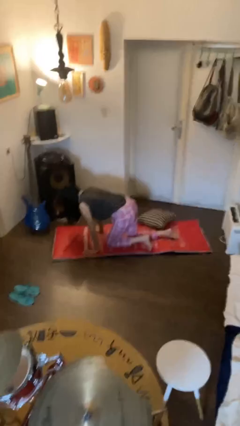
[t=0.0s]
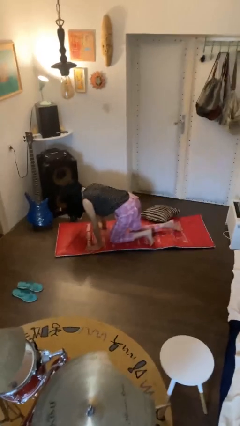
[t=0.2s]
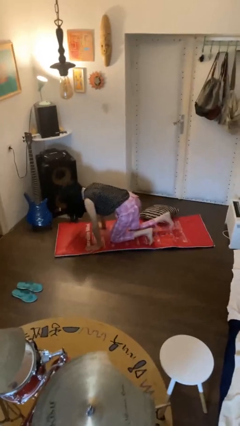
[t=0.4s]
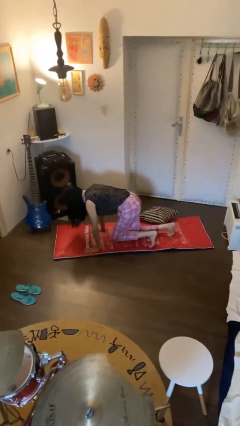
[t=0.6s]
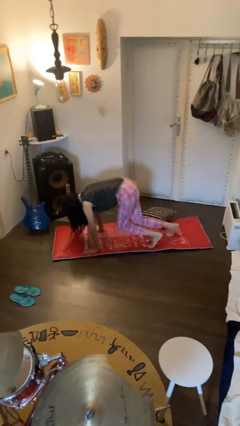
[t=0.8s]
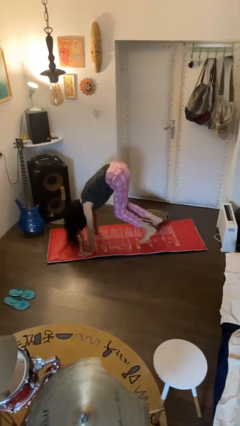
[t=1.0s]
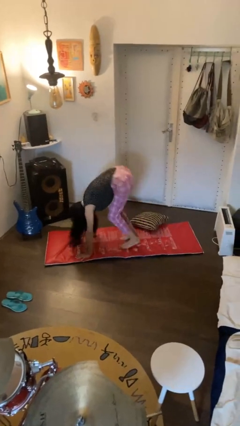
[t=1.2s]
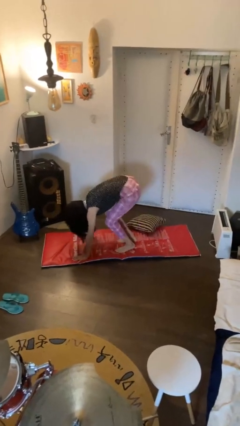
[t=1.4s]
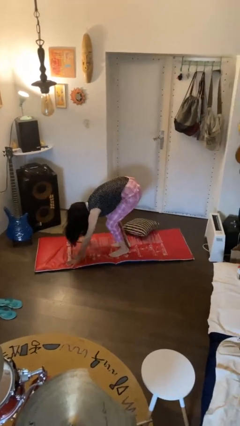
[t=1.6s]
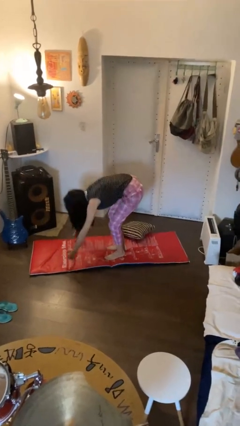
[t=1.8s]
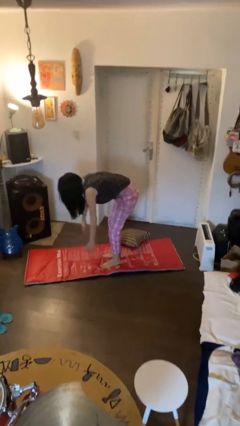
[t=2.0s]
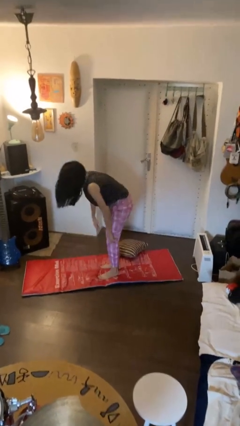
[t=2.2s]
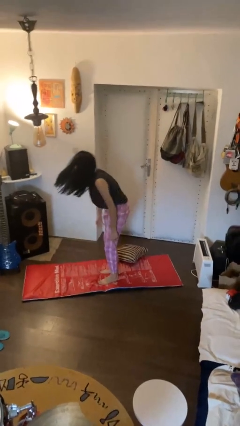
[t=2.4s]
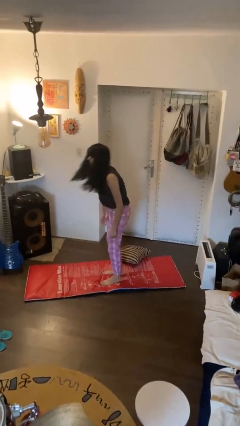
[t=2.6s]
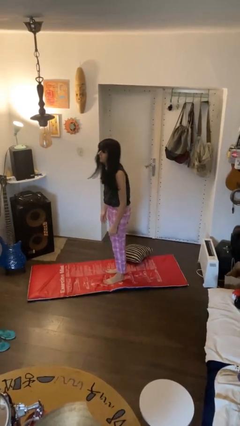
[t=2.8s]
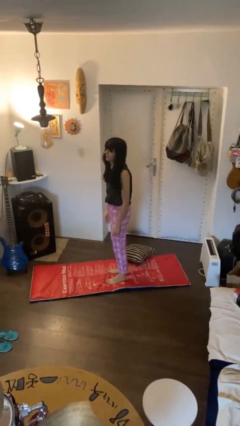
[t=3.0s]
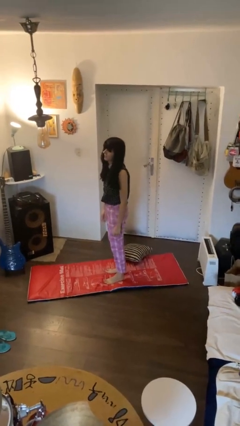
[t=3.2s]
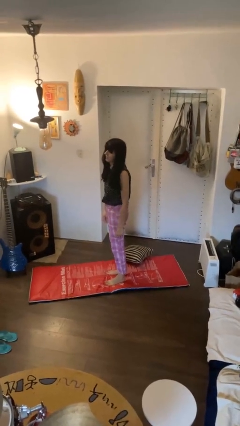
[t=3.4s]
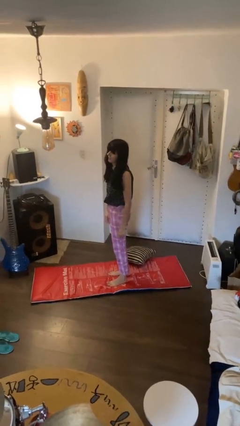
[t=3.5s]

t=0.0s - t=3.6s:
person stands up from floor

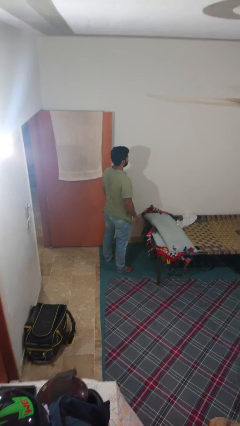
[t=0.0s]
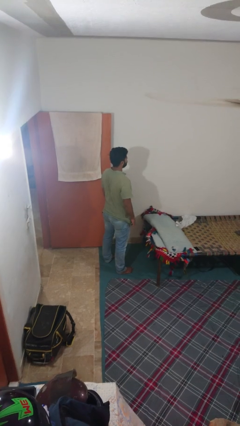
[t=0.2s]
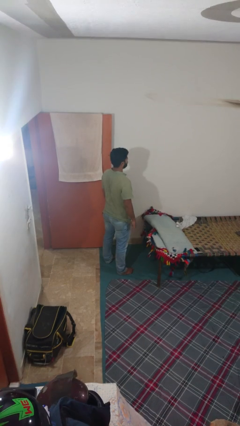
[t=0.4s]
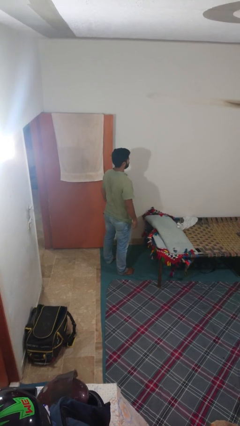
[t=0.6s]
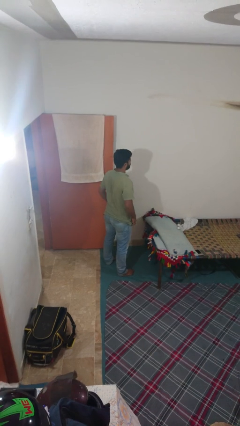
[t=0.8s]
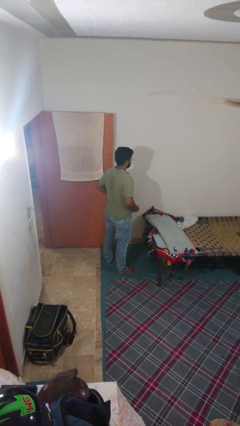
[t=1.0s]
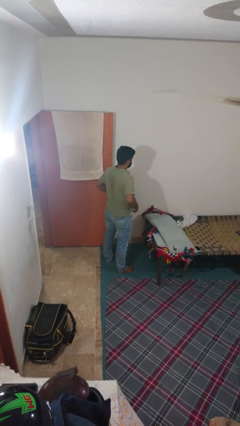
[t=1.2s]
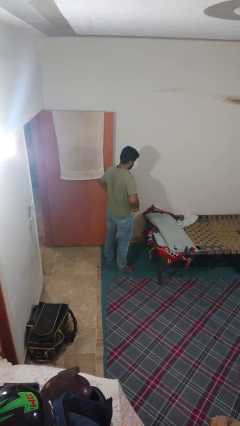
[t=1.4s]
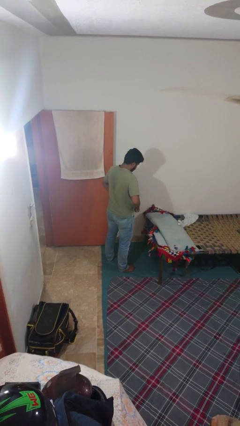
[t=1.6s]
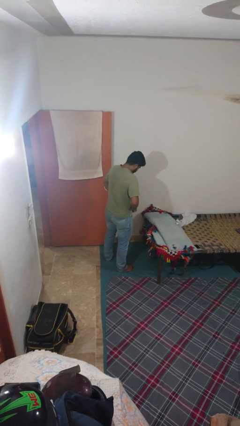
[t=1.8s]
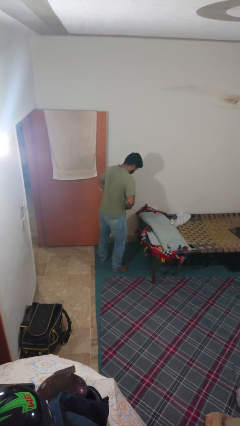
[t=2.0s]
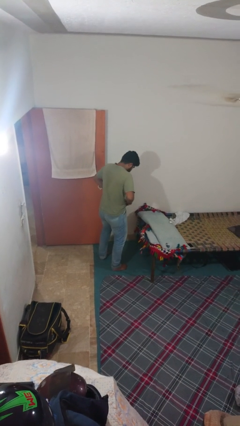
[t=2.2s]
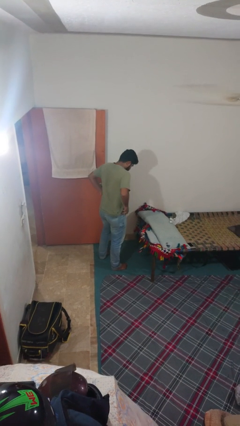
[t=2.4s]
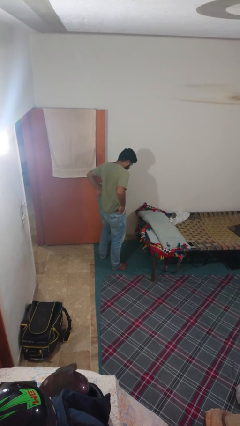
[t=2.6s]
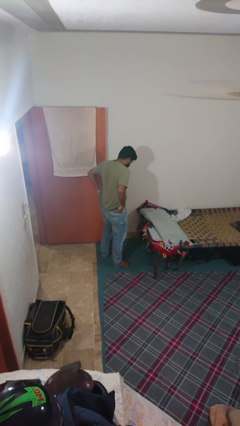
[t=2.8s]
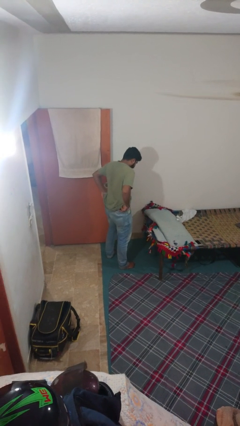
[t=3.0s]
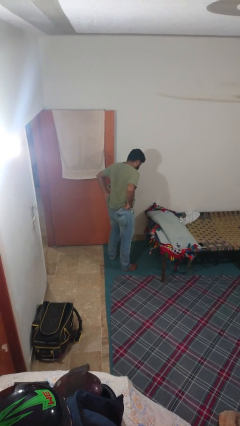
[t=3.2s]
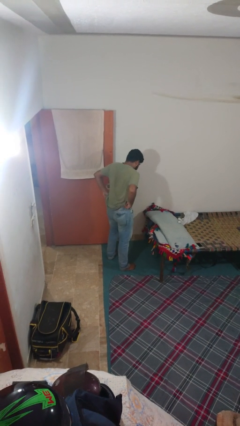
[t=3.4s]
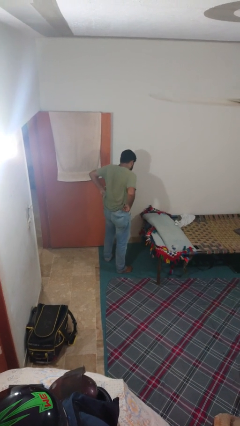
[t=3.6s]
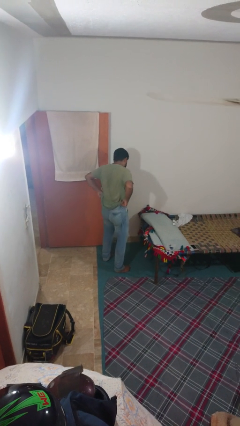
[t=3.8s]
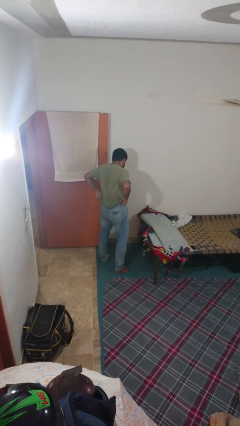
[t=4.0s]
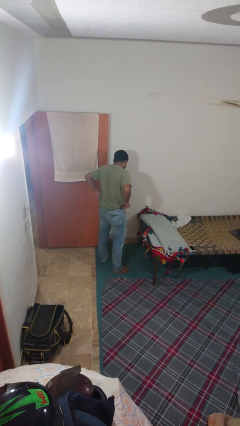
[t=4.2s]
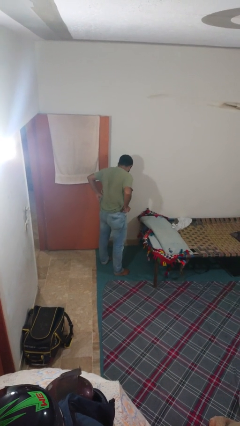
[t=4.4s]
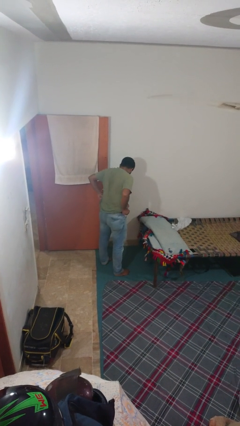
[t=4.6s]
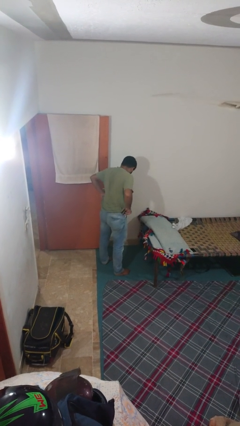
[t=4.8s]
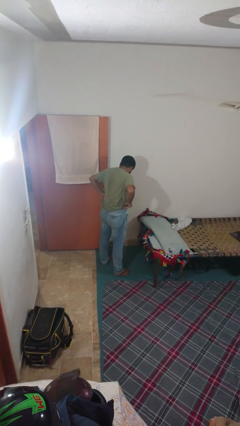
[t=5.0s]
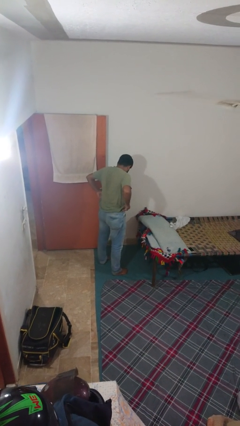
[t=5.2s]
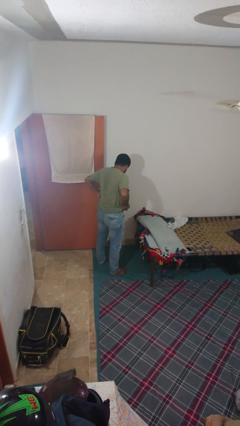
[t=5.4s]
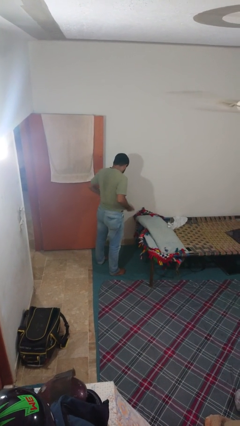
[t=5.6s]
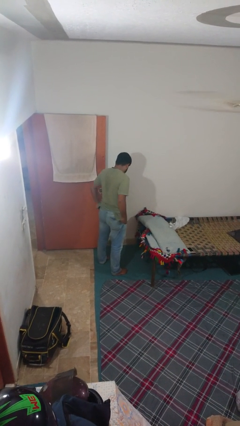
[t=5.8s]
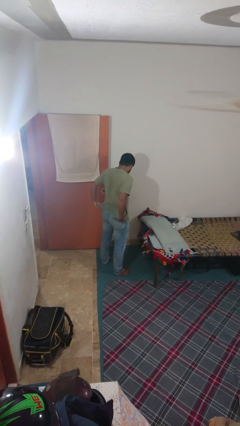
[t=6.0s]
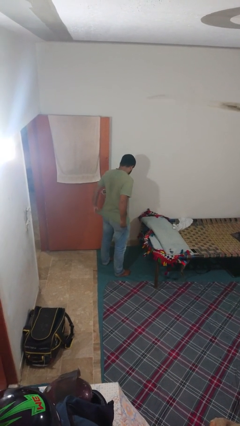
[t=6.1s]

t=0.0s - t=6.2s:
person hikes up pants

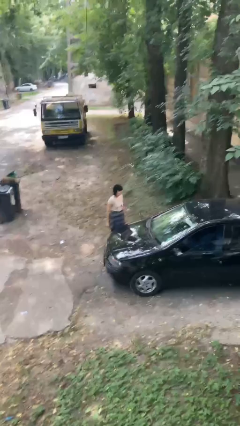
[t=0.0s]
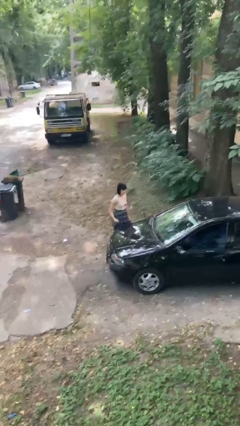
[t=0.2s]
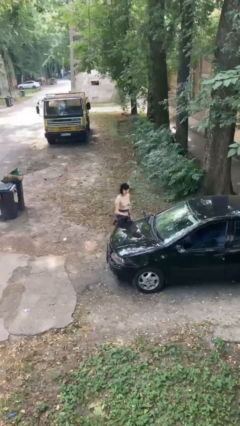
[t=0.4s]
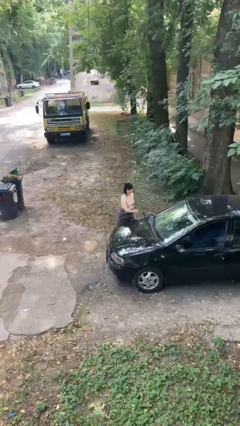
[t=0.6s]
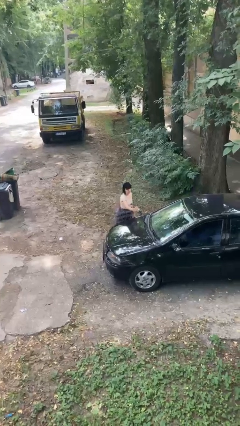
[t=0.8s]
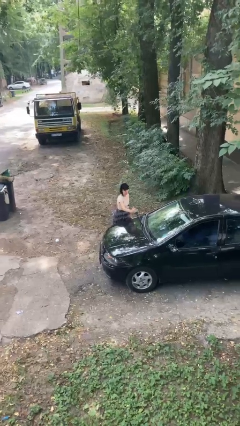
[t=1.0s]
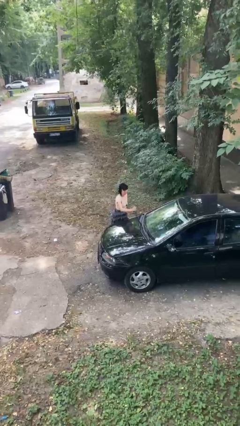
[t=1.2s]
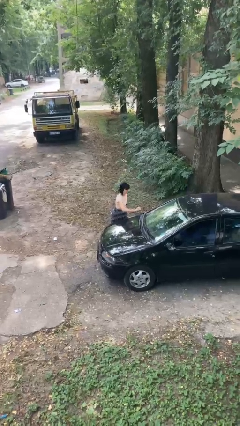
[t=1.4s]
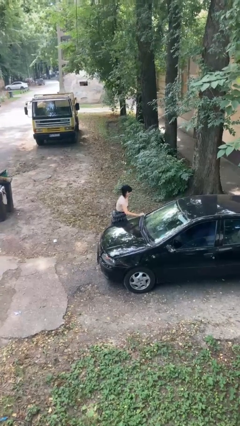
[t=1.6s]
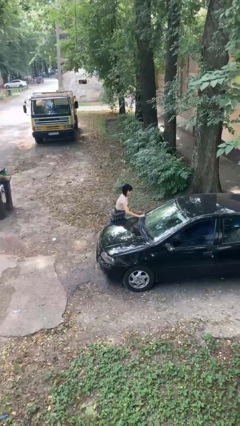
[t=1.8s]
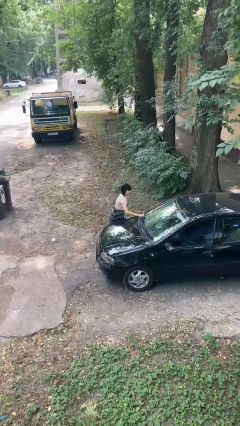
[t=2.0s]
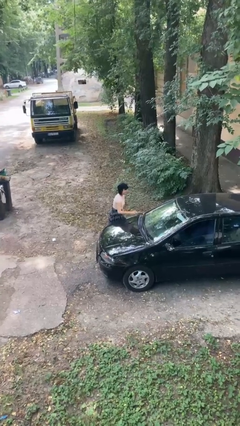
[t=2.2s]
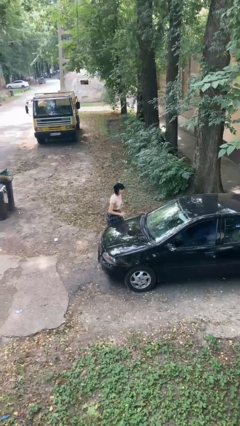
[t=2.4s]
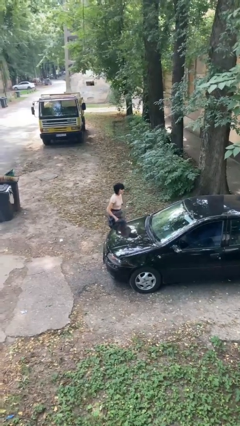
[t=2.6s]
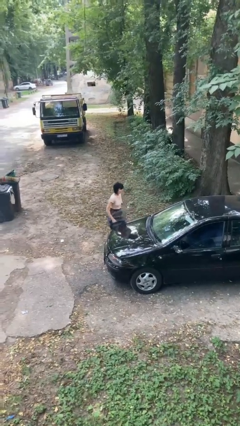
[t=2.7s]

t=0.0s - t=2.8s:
person flips down car wipers

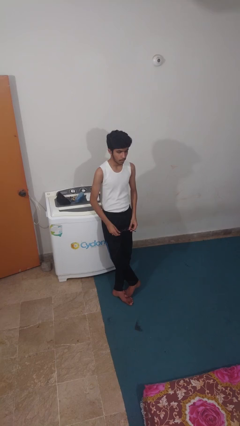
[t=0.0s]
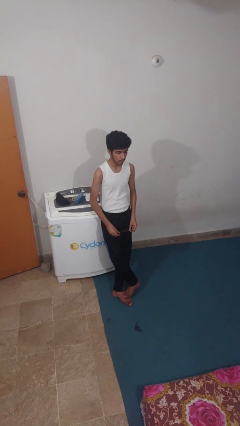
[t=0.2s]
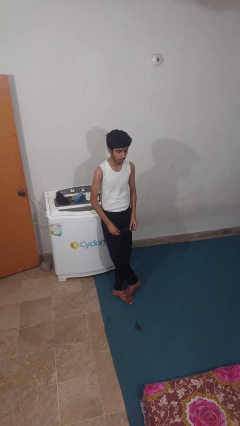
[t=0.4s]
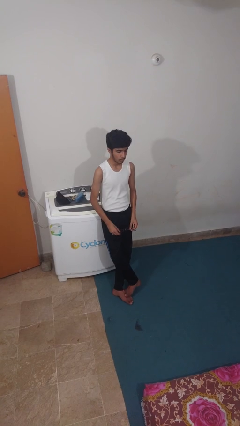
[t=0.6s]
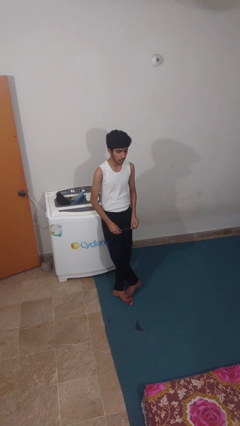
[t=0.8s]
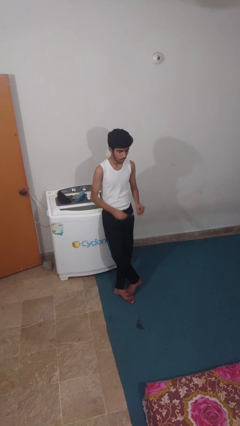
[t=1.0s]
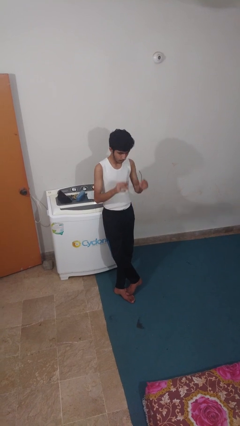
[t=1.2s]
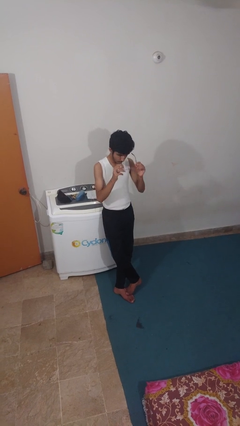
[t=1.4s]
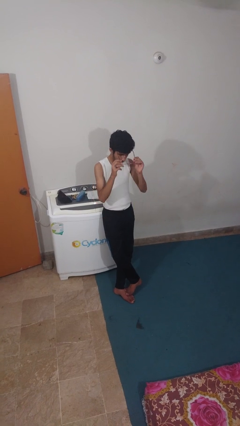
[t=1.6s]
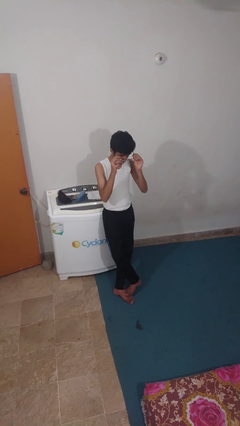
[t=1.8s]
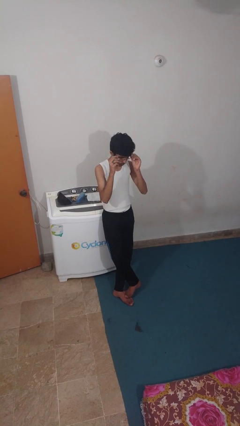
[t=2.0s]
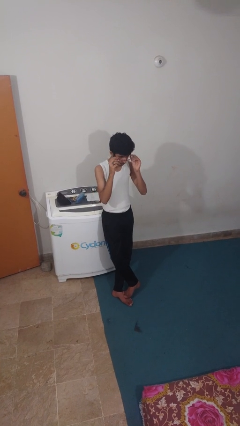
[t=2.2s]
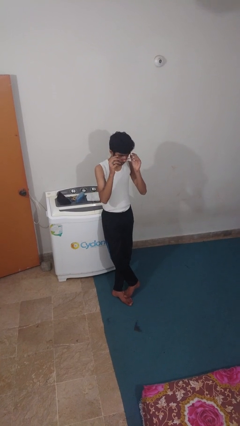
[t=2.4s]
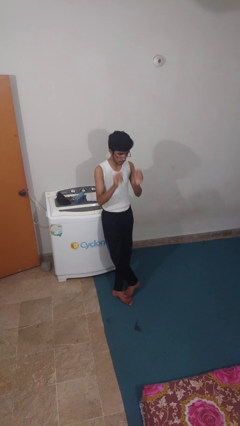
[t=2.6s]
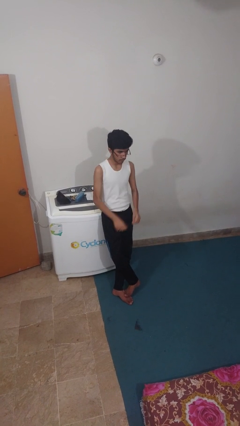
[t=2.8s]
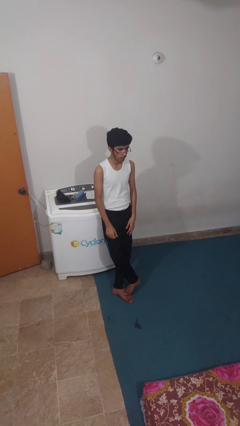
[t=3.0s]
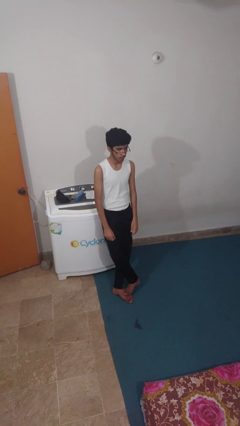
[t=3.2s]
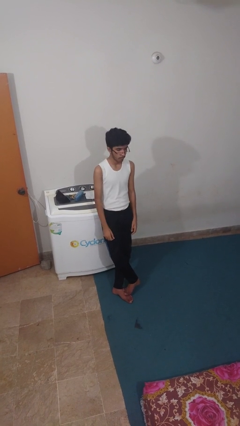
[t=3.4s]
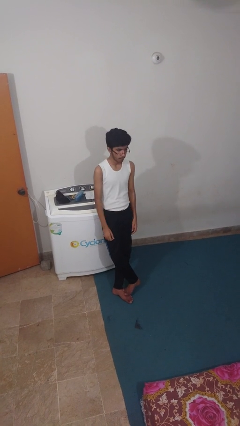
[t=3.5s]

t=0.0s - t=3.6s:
person puts on glasses

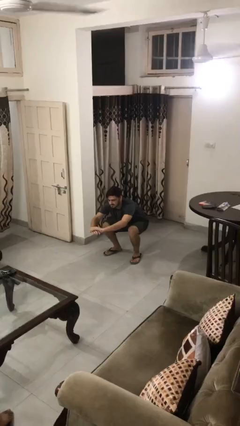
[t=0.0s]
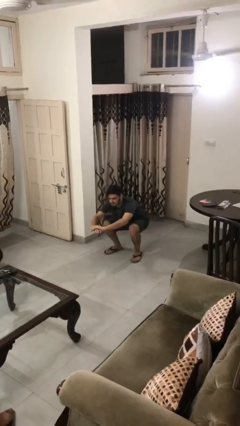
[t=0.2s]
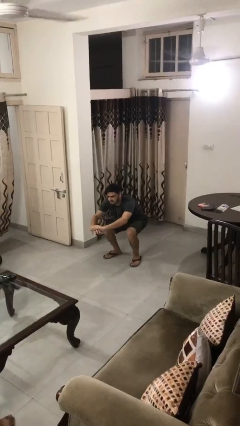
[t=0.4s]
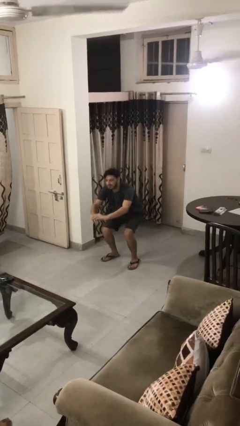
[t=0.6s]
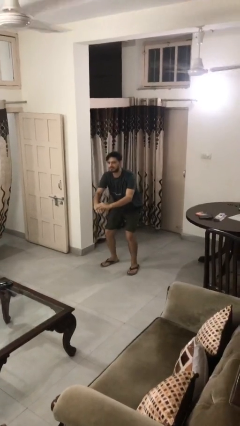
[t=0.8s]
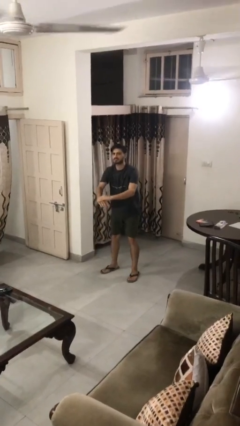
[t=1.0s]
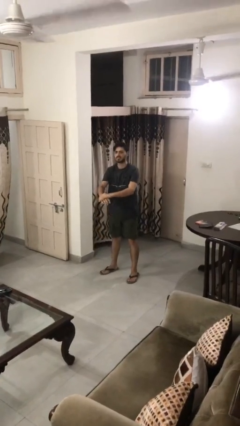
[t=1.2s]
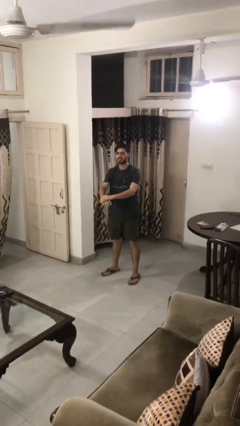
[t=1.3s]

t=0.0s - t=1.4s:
person stands up
